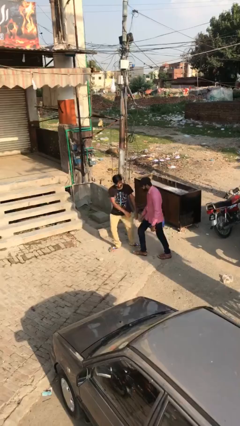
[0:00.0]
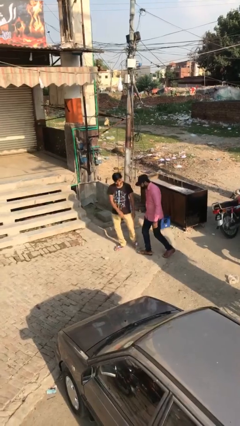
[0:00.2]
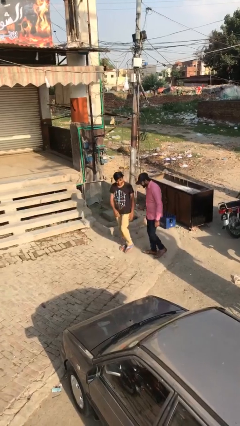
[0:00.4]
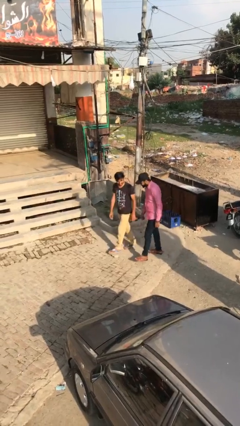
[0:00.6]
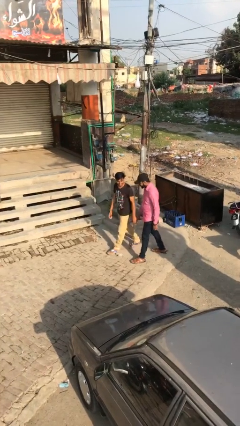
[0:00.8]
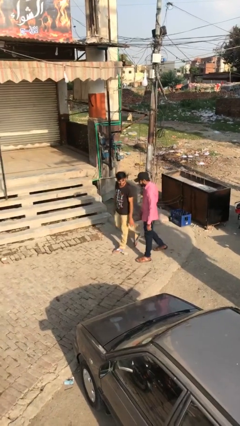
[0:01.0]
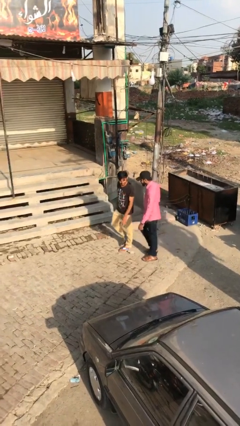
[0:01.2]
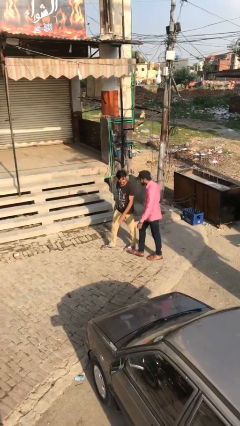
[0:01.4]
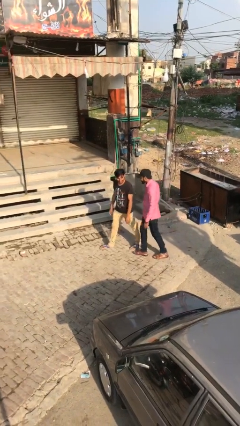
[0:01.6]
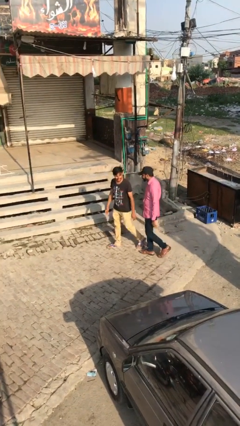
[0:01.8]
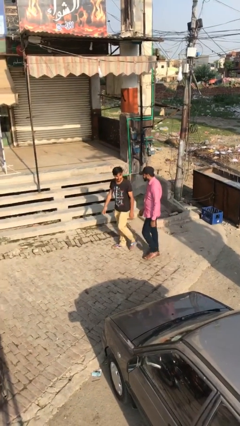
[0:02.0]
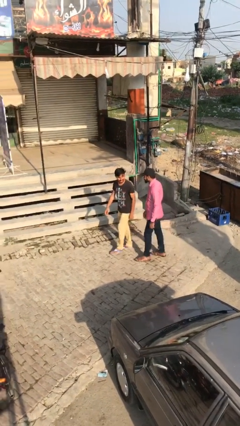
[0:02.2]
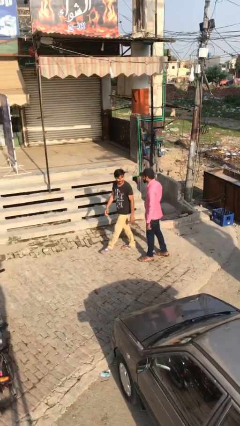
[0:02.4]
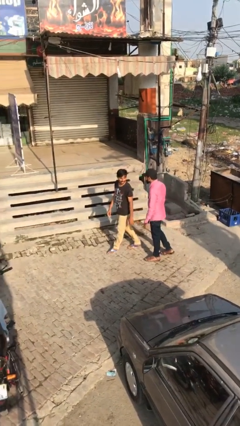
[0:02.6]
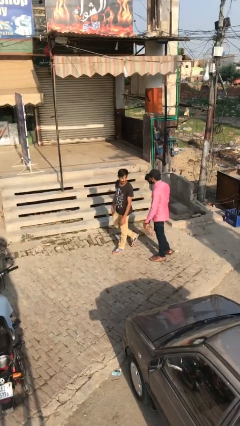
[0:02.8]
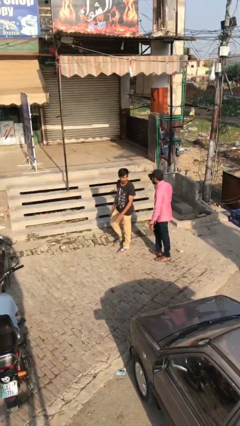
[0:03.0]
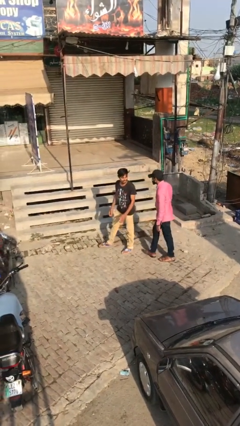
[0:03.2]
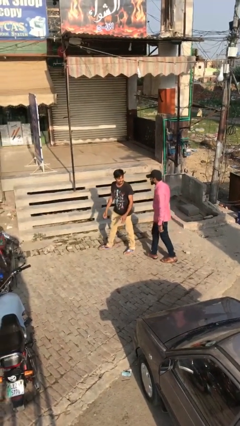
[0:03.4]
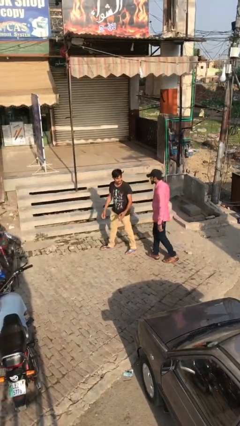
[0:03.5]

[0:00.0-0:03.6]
person talks to person

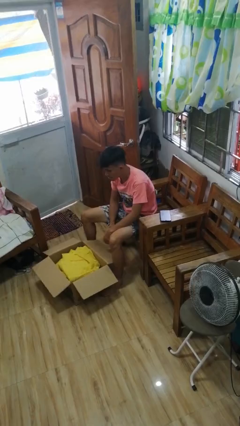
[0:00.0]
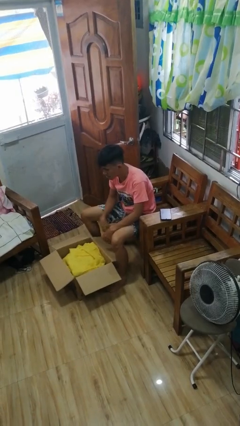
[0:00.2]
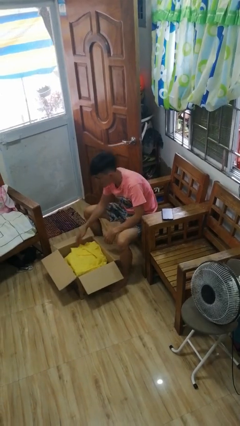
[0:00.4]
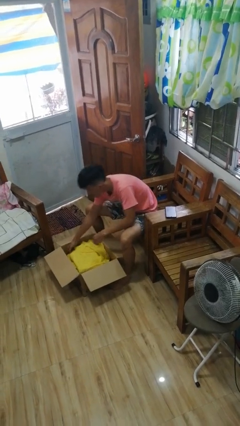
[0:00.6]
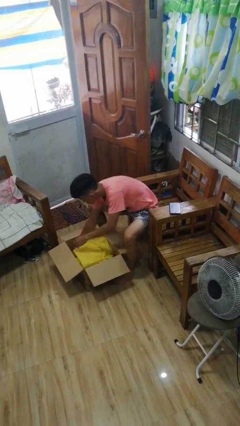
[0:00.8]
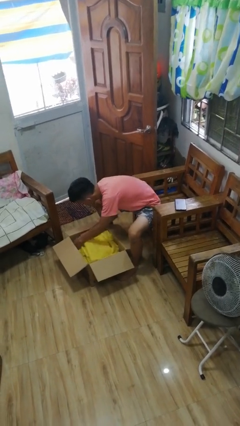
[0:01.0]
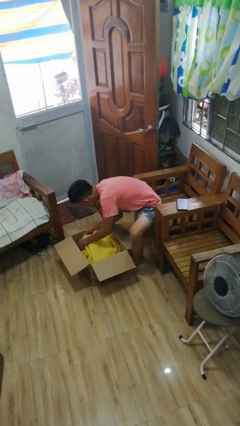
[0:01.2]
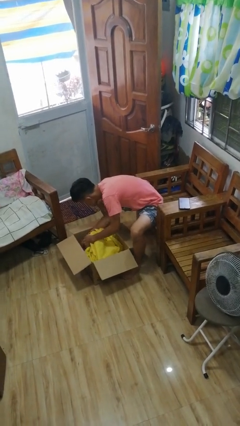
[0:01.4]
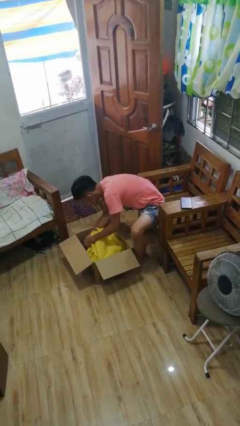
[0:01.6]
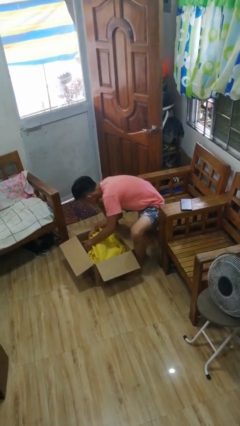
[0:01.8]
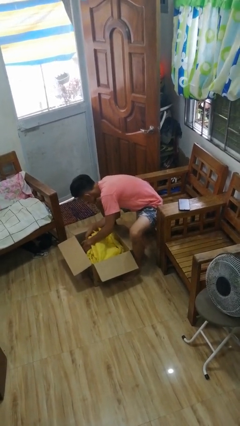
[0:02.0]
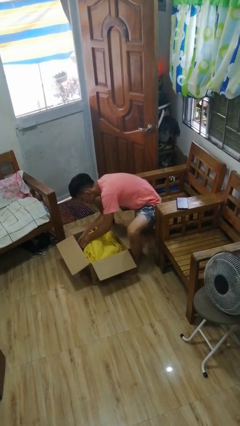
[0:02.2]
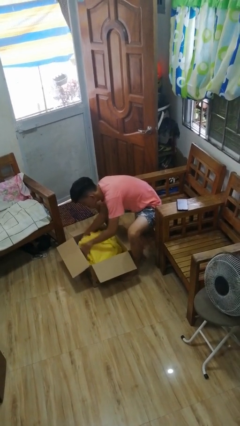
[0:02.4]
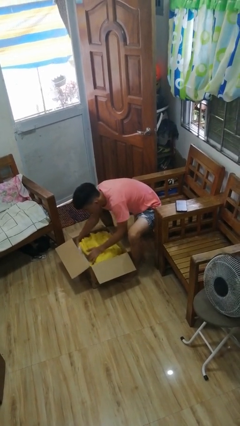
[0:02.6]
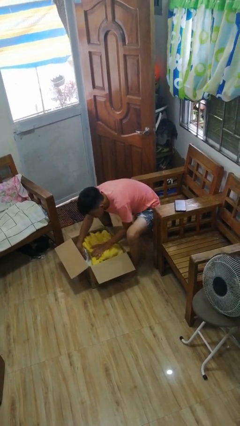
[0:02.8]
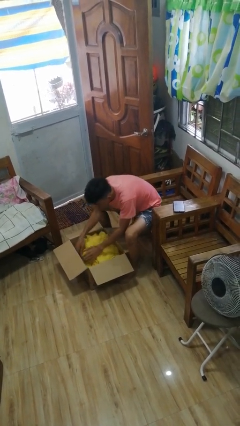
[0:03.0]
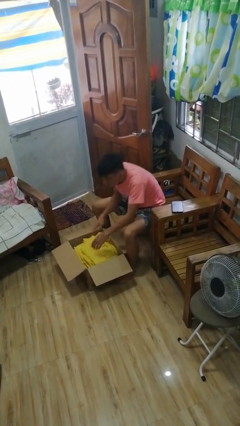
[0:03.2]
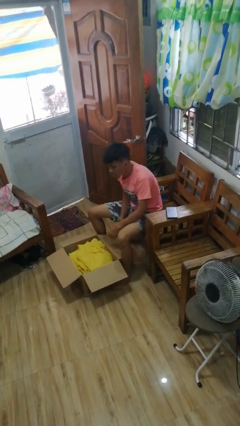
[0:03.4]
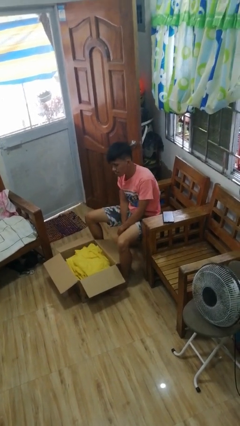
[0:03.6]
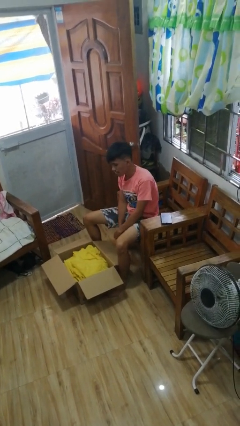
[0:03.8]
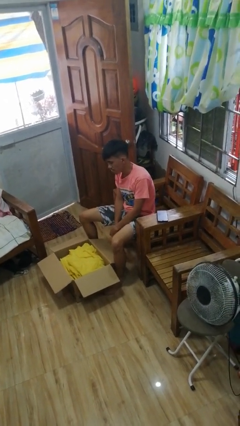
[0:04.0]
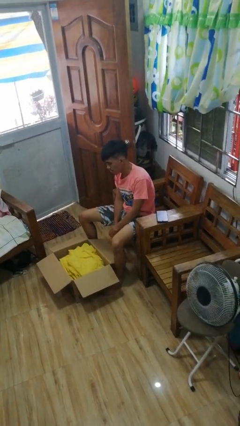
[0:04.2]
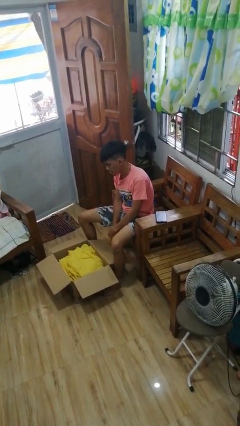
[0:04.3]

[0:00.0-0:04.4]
person searches in box

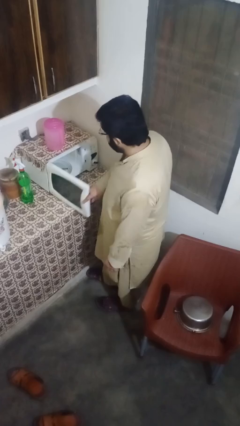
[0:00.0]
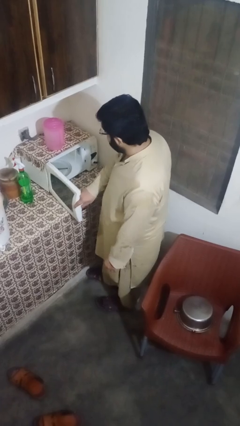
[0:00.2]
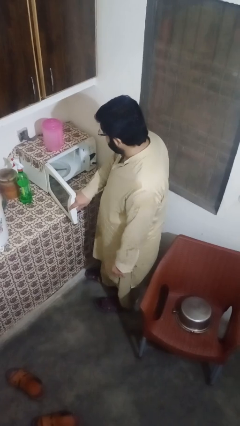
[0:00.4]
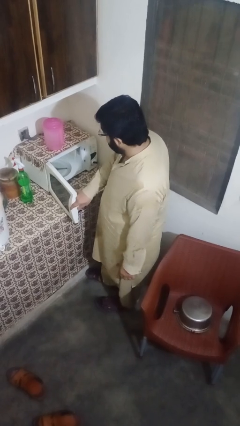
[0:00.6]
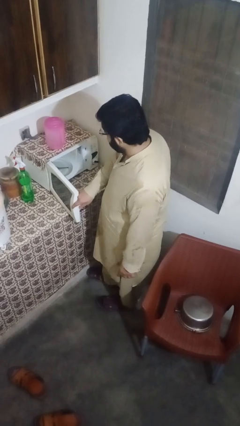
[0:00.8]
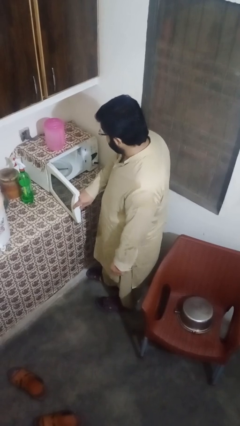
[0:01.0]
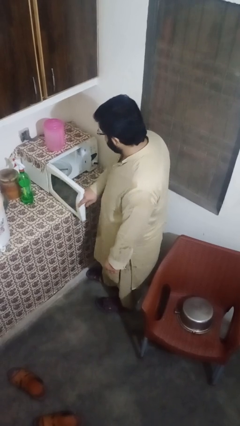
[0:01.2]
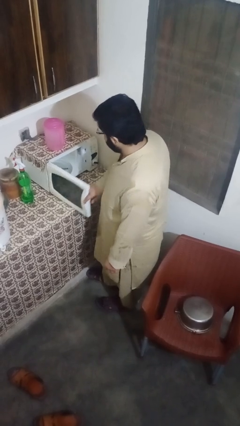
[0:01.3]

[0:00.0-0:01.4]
person opens microwave

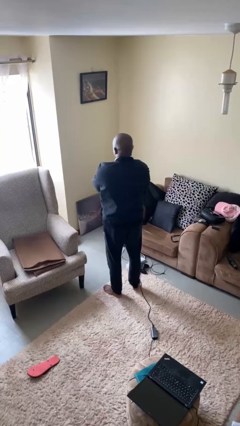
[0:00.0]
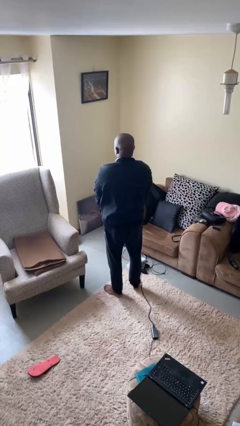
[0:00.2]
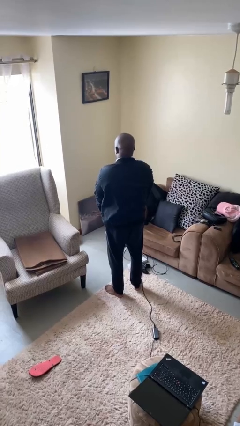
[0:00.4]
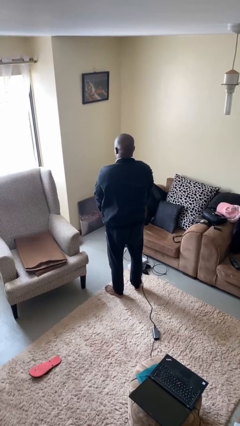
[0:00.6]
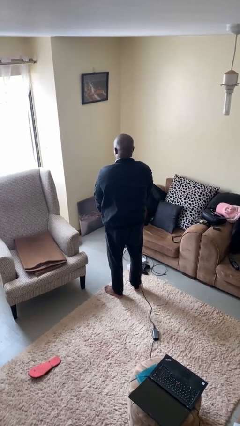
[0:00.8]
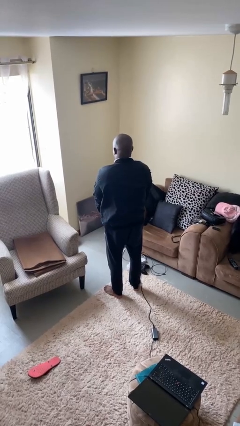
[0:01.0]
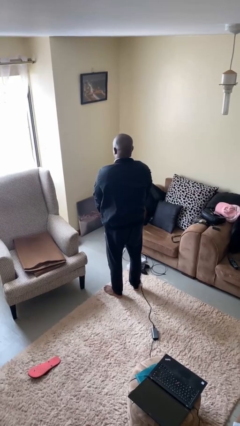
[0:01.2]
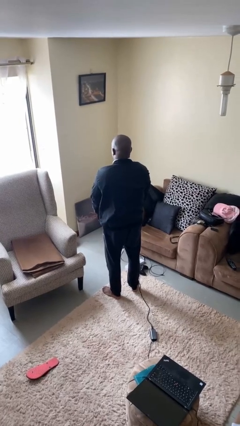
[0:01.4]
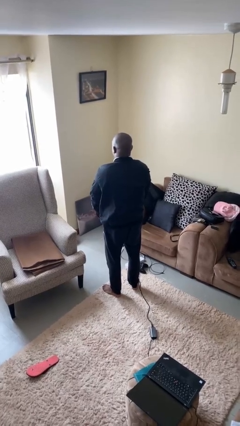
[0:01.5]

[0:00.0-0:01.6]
person unzips jacket

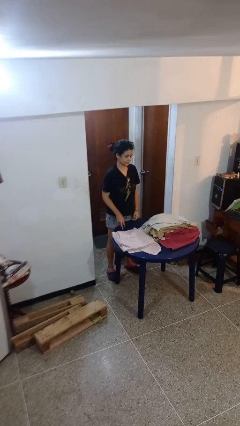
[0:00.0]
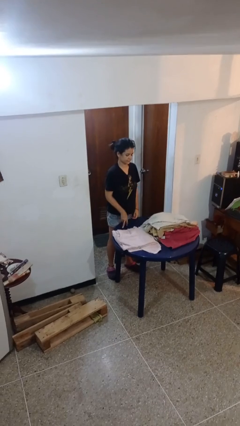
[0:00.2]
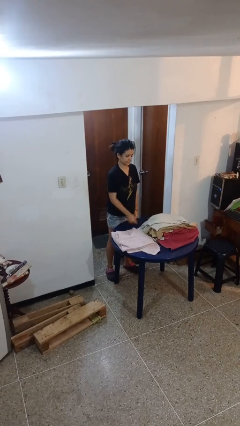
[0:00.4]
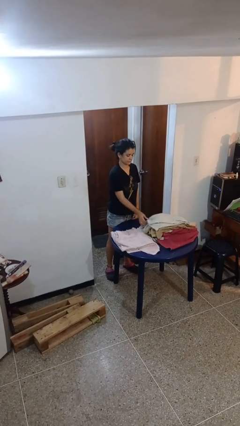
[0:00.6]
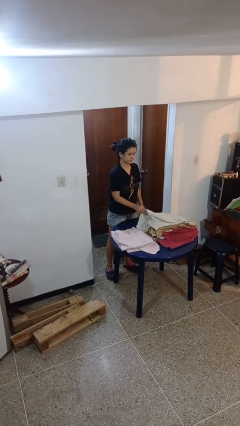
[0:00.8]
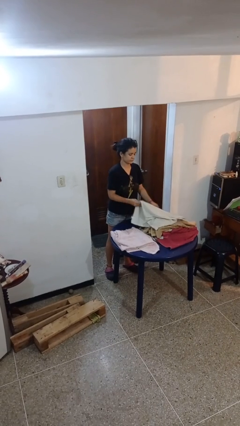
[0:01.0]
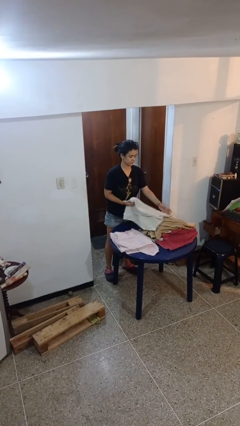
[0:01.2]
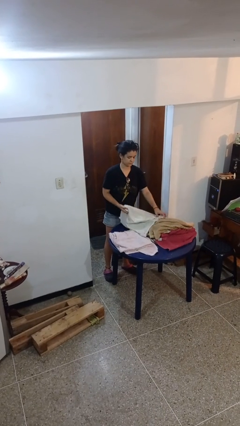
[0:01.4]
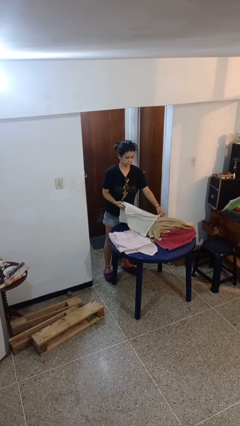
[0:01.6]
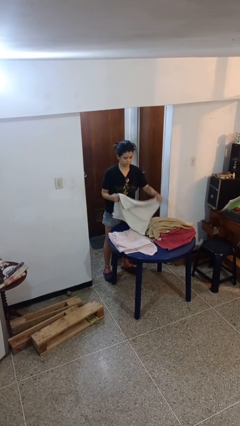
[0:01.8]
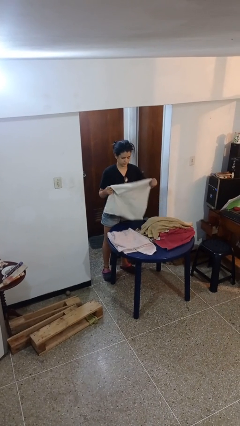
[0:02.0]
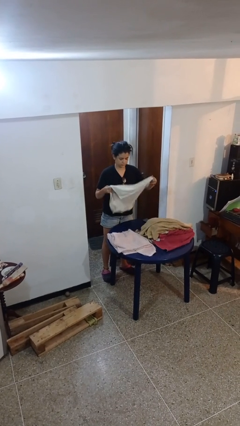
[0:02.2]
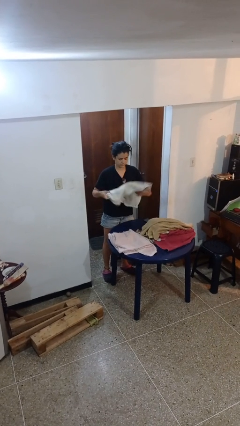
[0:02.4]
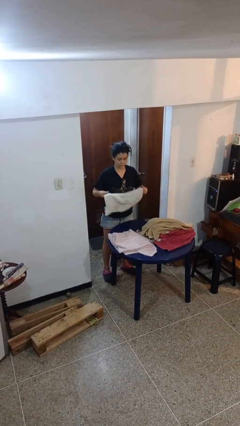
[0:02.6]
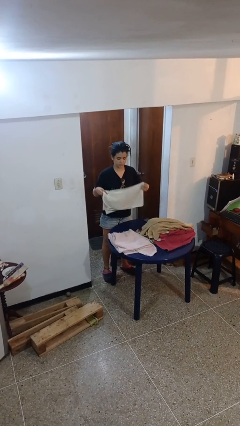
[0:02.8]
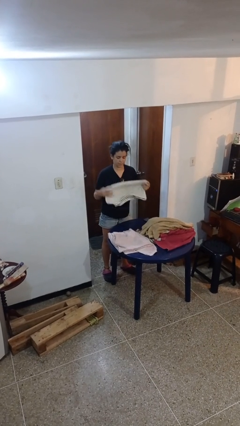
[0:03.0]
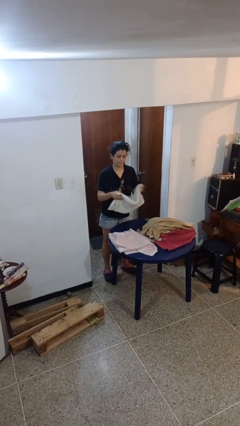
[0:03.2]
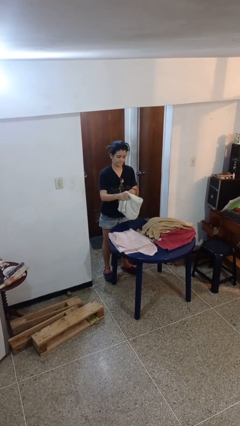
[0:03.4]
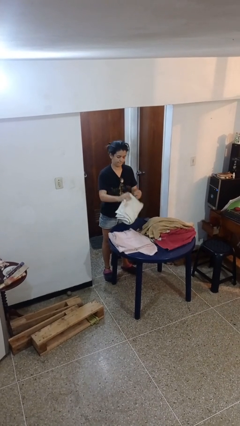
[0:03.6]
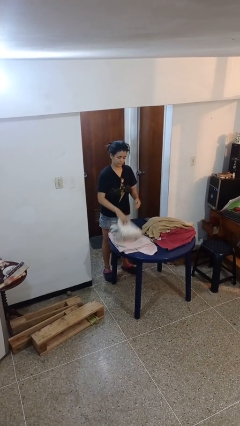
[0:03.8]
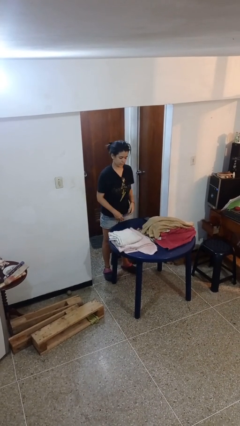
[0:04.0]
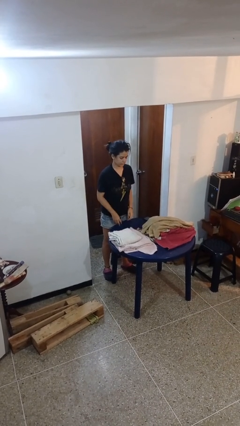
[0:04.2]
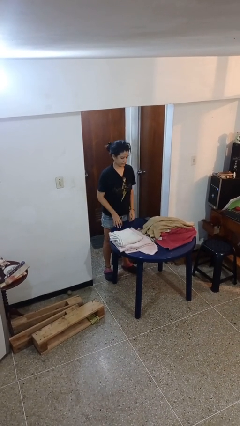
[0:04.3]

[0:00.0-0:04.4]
person folds towel

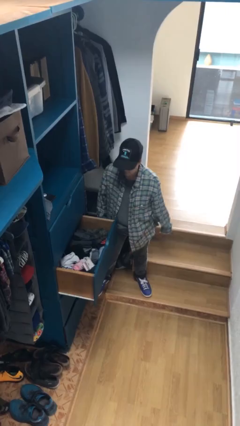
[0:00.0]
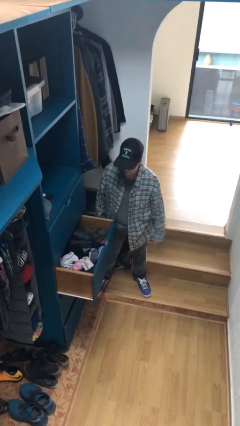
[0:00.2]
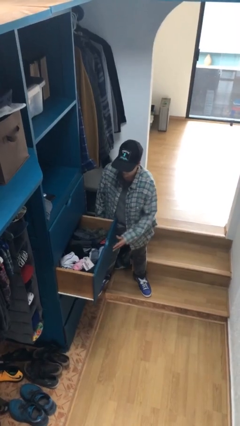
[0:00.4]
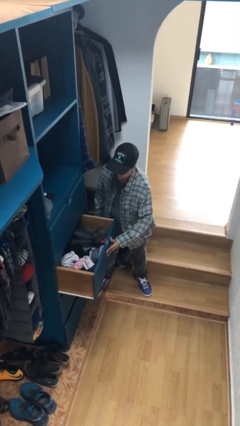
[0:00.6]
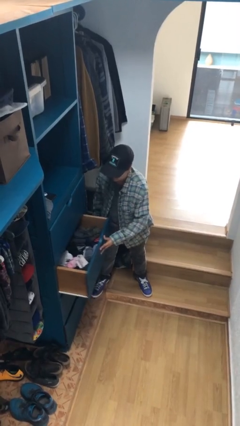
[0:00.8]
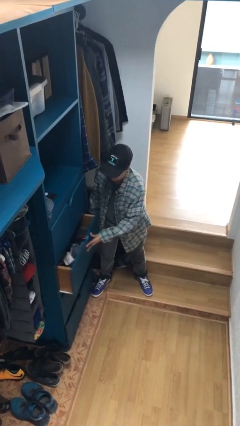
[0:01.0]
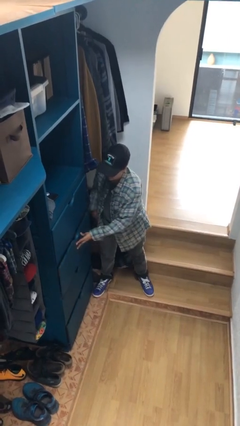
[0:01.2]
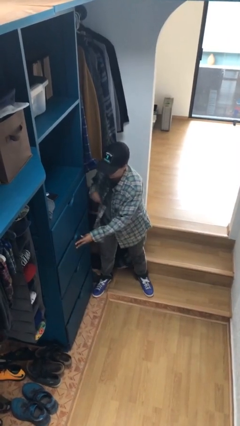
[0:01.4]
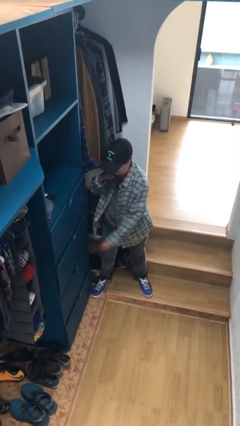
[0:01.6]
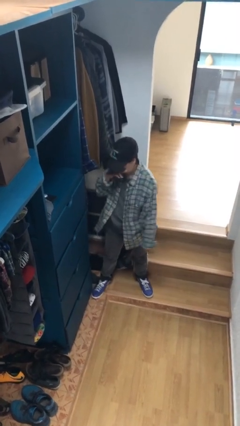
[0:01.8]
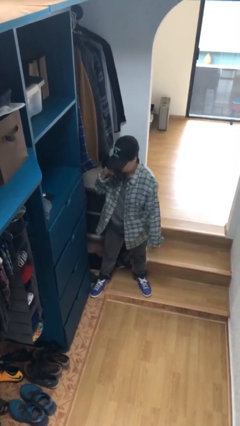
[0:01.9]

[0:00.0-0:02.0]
person closes dresser drawer
